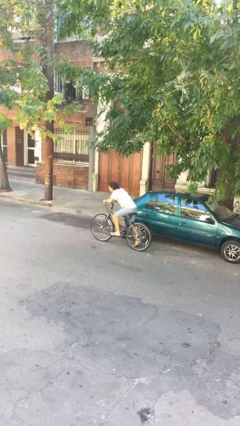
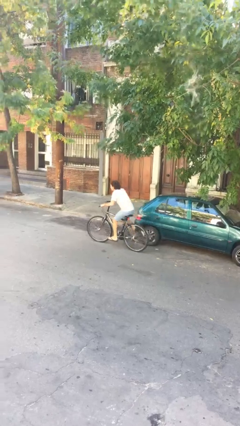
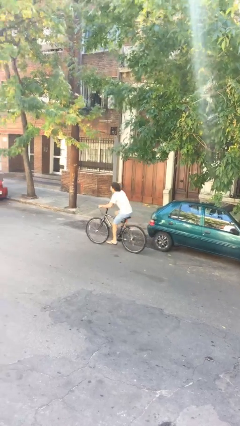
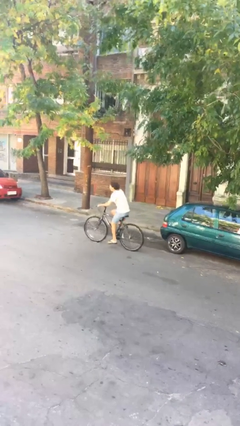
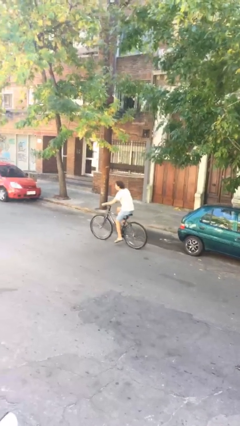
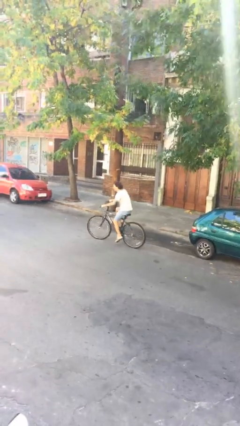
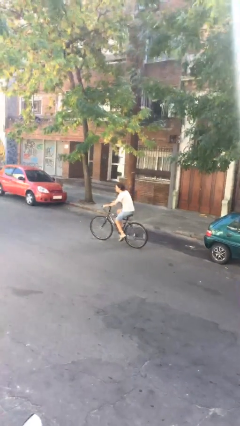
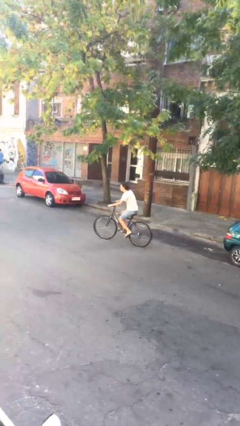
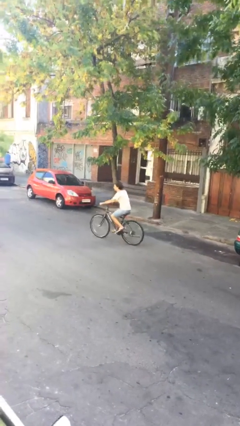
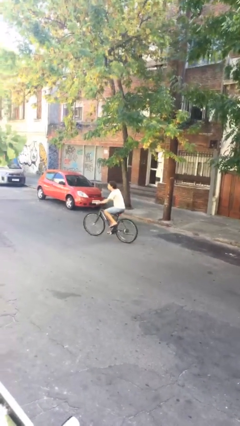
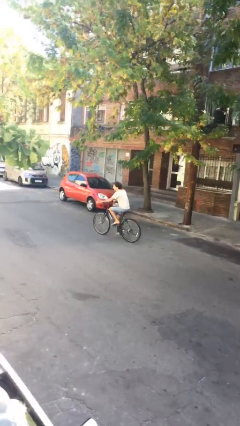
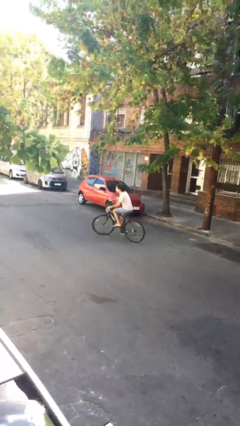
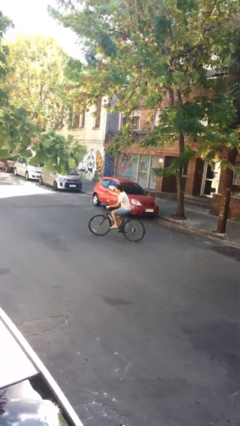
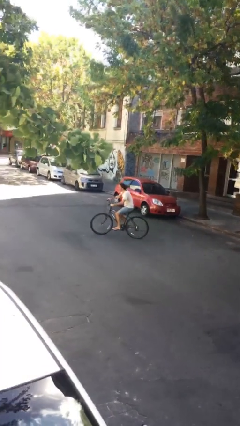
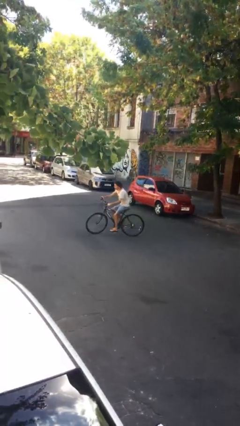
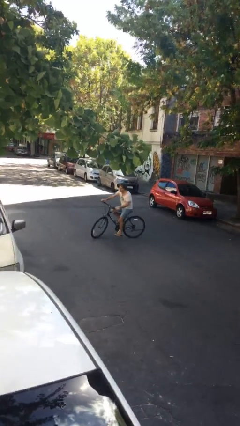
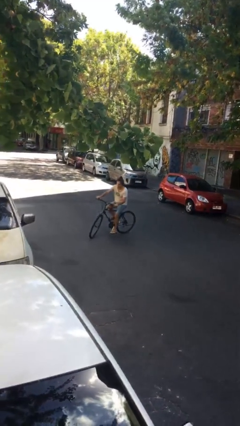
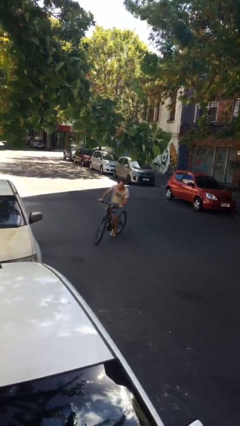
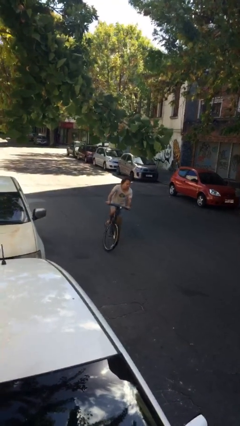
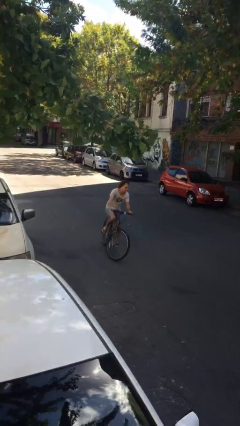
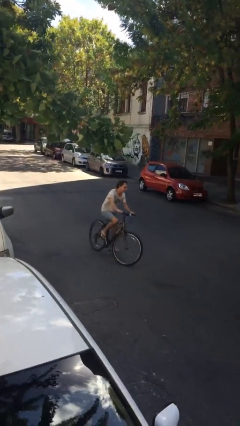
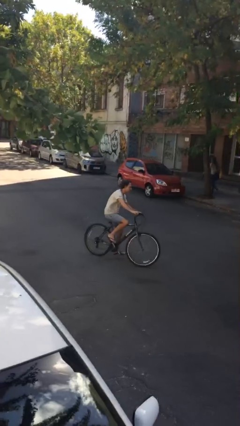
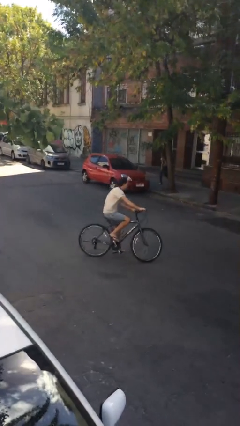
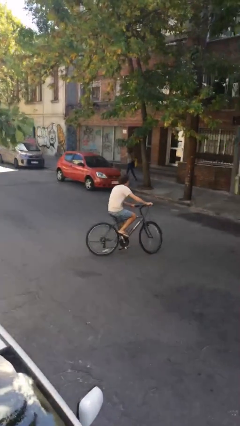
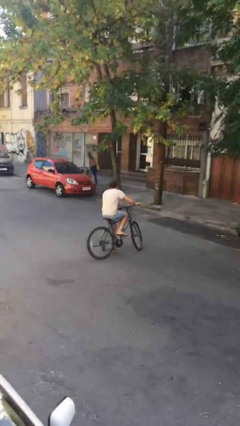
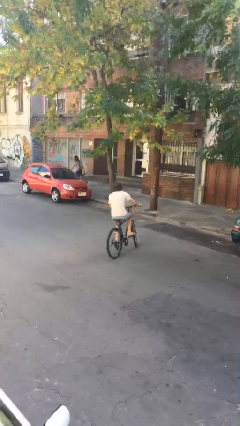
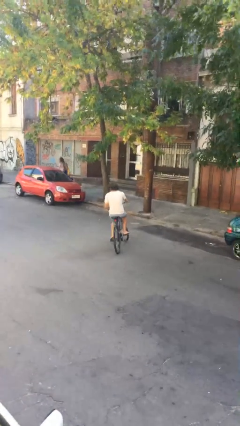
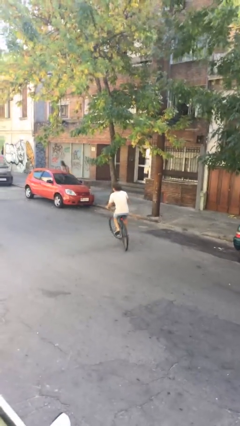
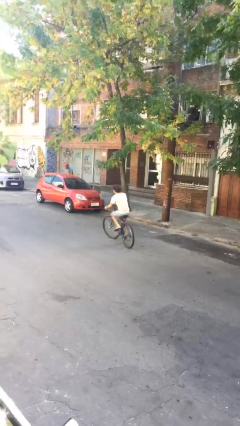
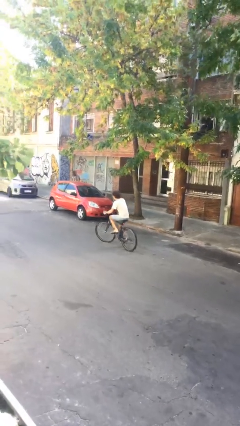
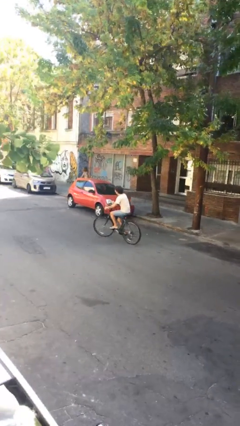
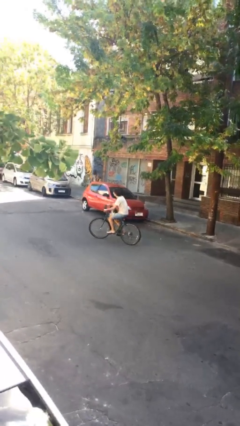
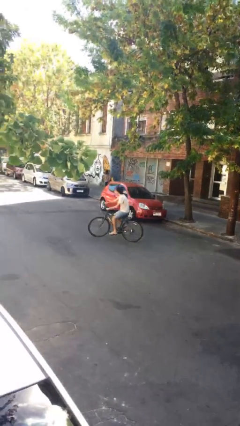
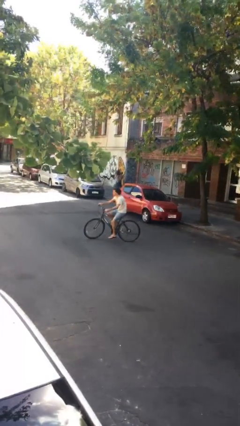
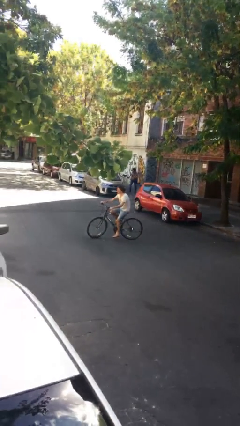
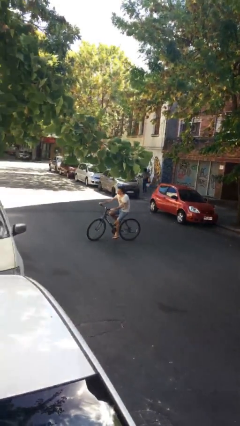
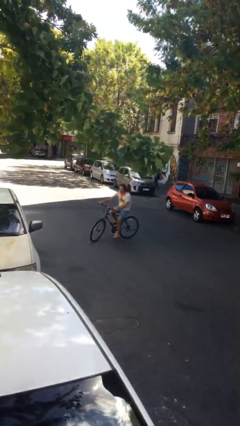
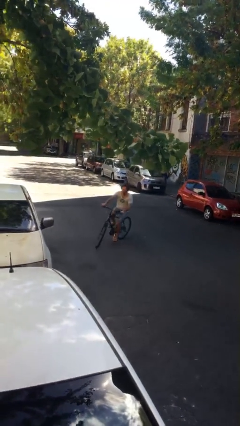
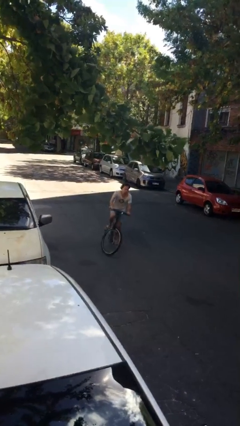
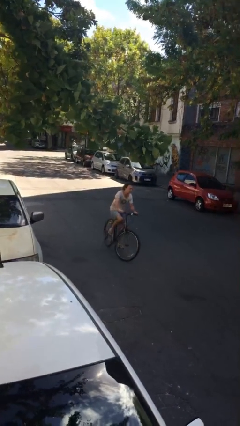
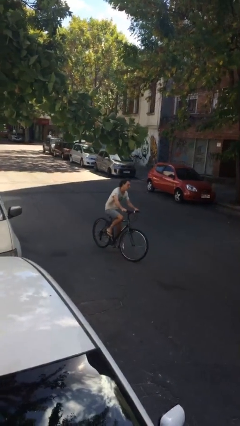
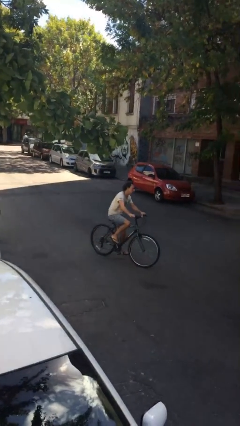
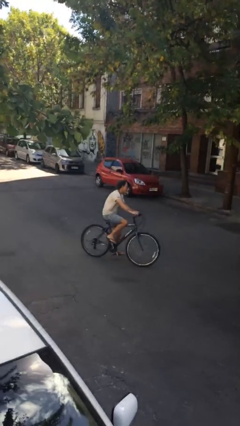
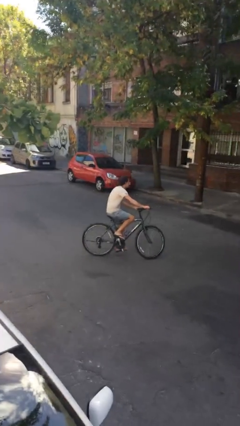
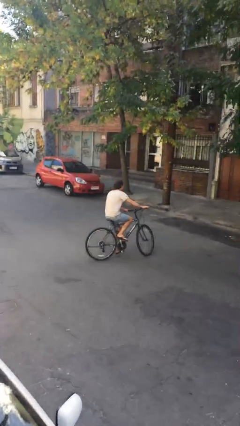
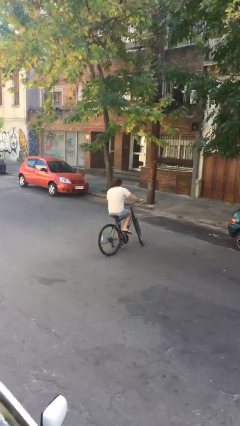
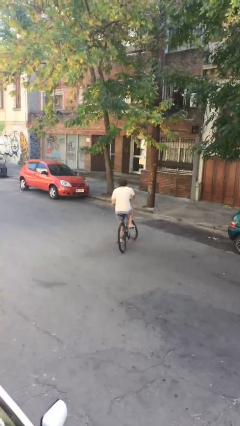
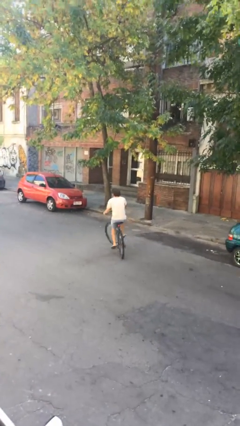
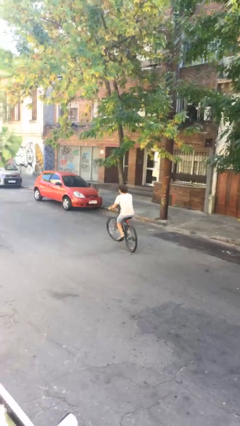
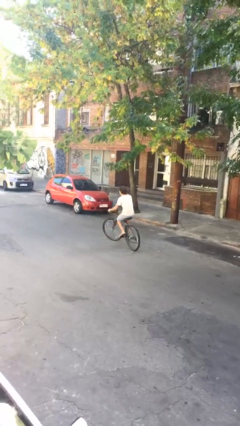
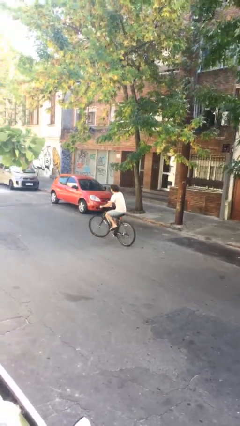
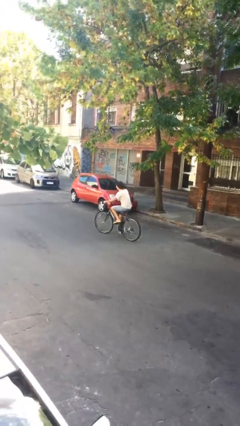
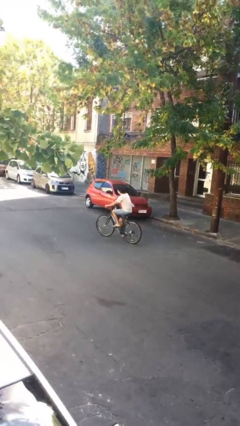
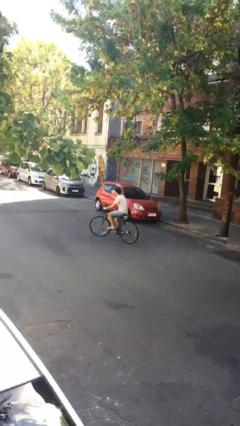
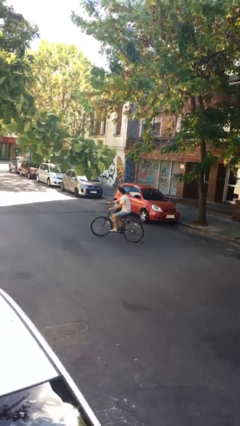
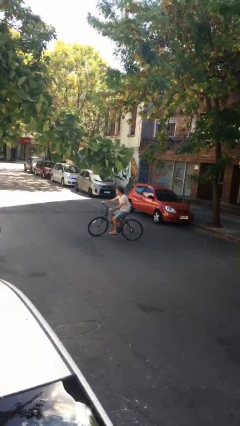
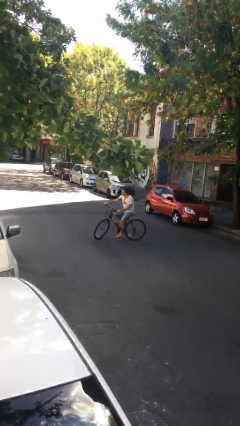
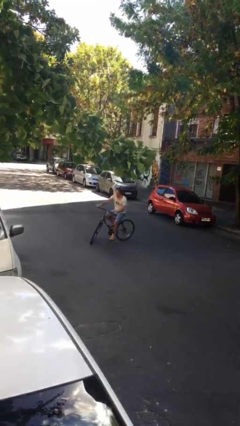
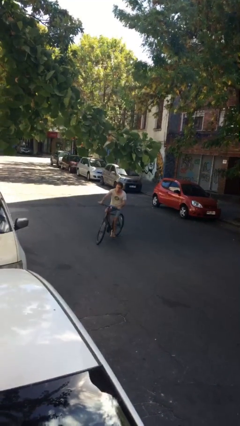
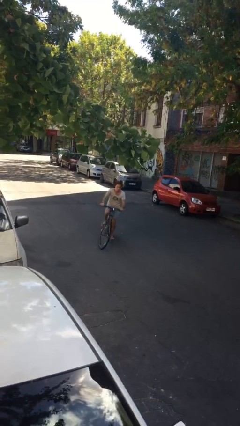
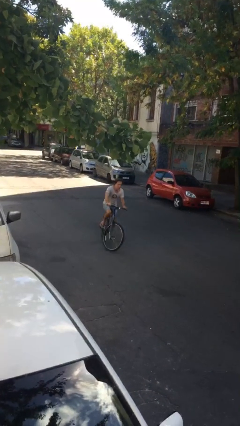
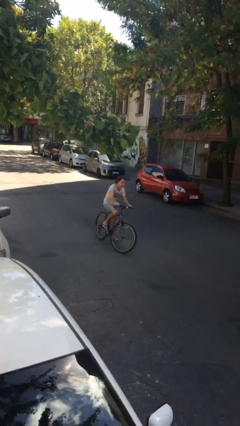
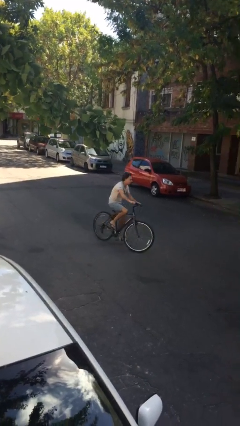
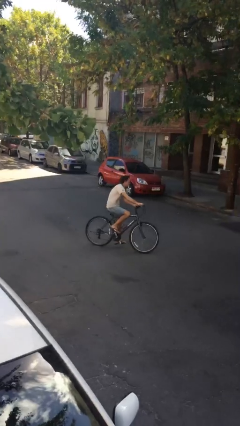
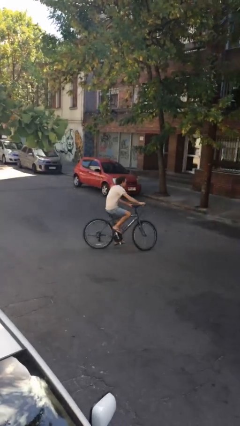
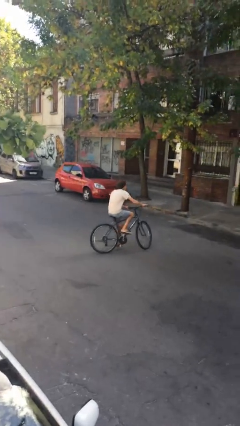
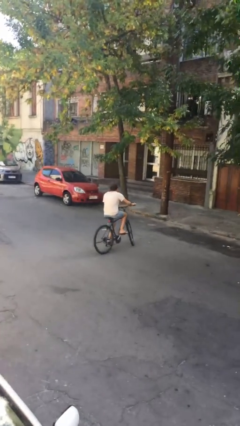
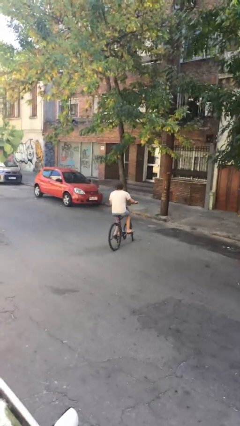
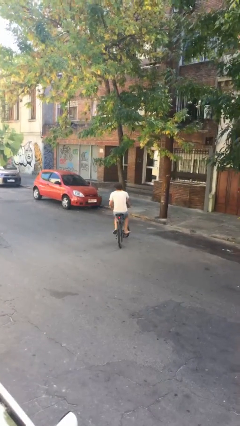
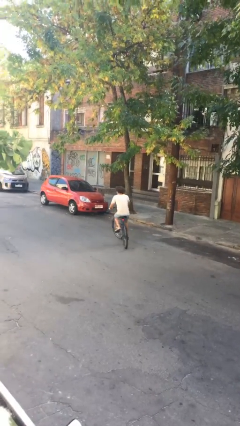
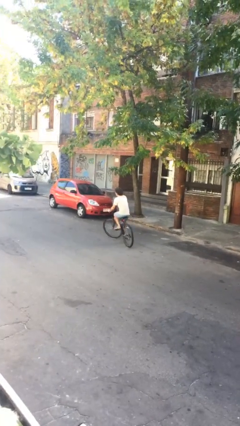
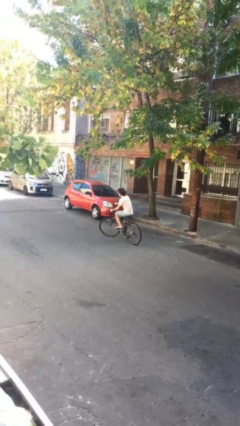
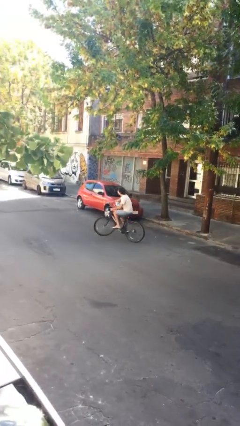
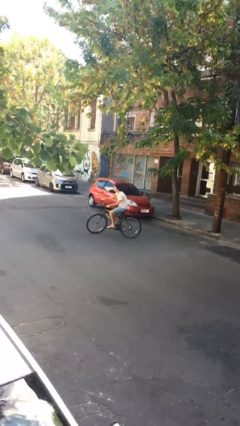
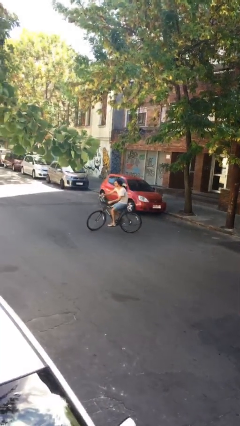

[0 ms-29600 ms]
person rides bicycle

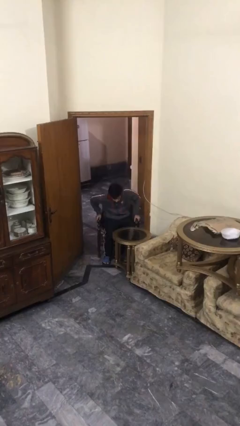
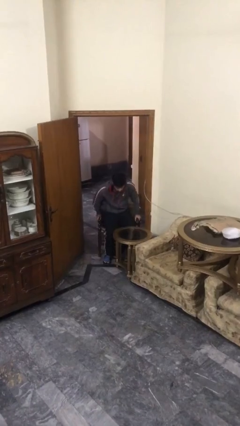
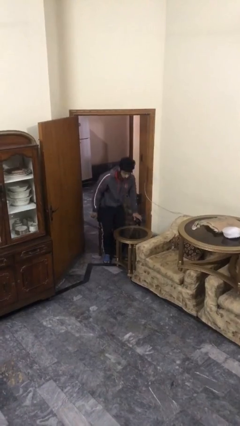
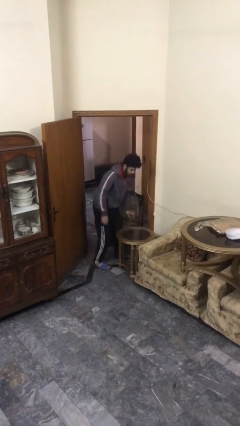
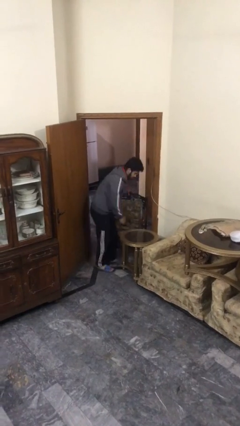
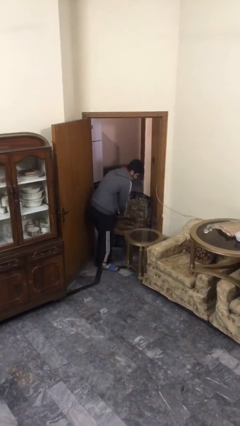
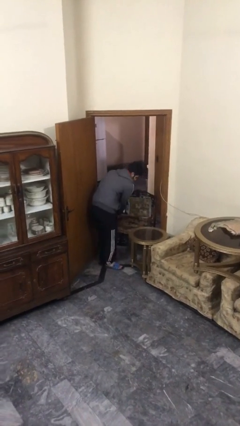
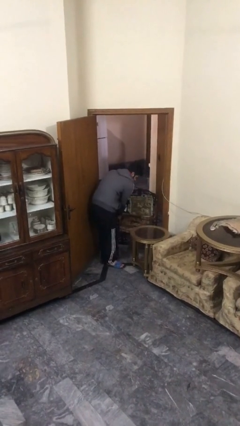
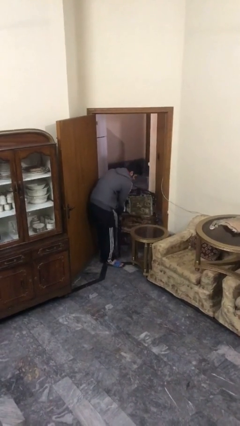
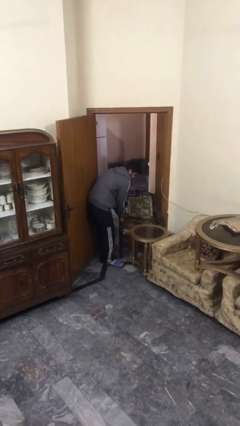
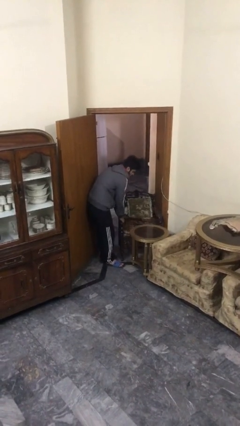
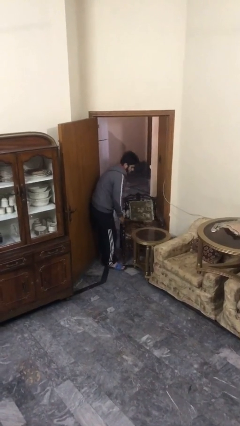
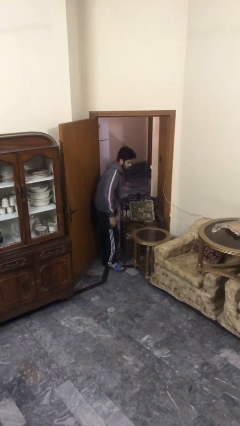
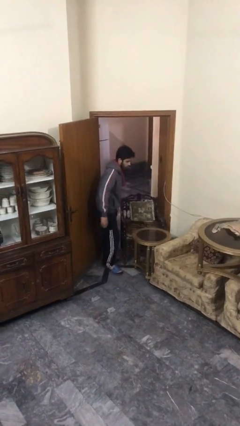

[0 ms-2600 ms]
person stands up

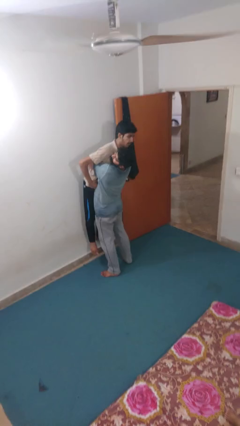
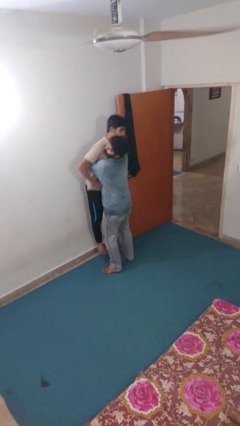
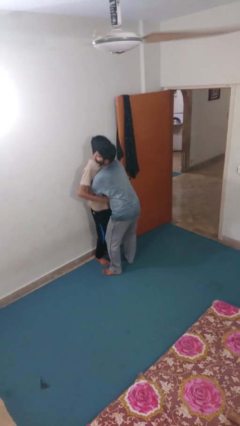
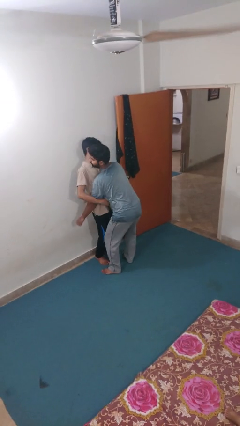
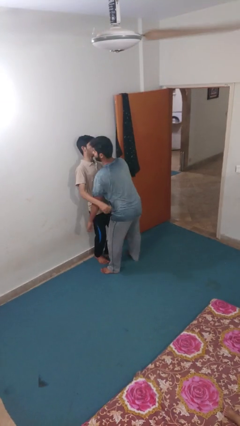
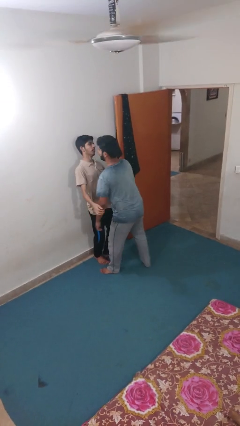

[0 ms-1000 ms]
person puts down person
